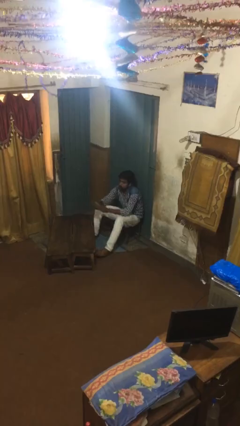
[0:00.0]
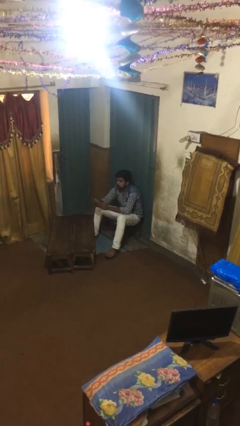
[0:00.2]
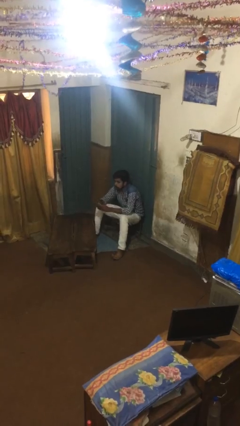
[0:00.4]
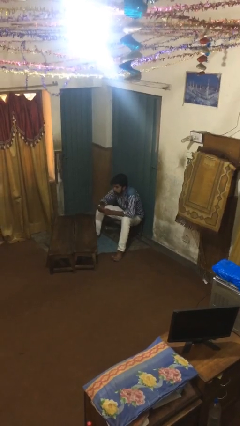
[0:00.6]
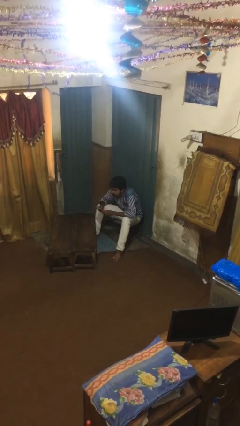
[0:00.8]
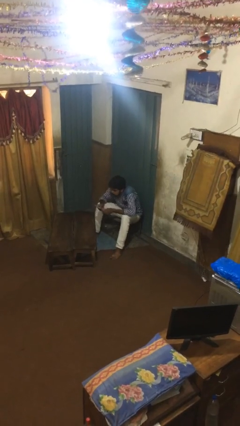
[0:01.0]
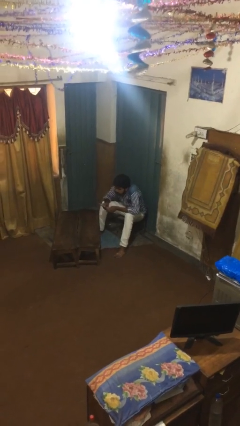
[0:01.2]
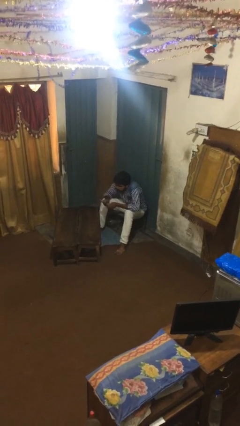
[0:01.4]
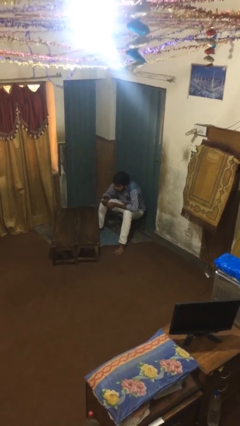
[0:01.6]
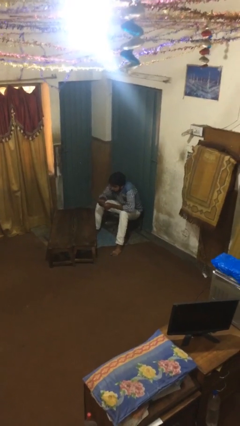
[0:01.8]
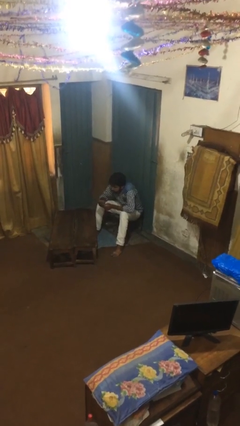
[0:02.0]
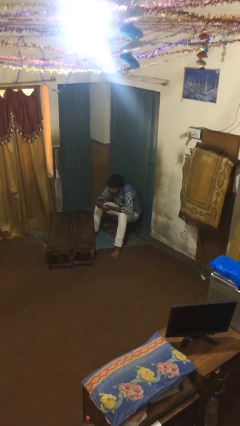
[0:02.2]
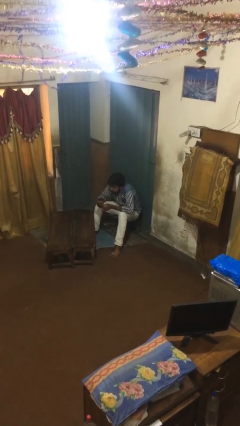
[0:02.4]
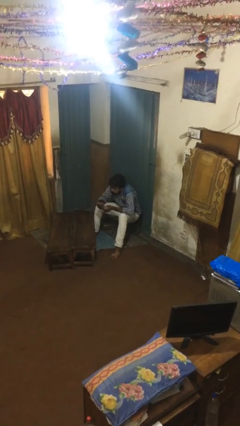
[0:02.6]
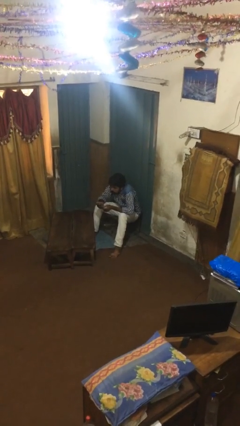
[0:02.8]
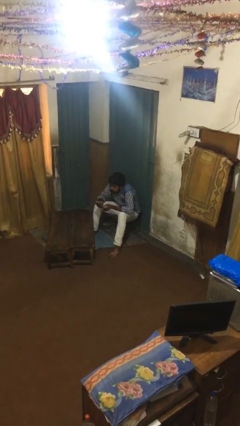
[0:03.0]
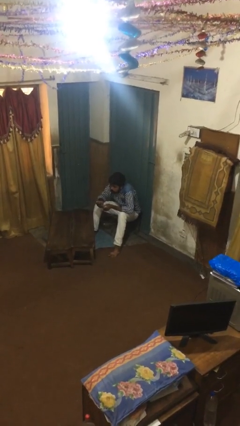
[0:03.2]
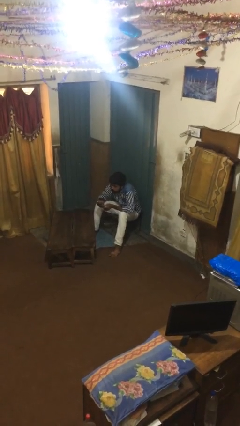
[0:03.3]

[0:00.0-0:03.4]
person reads document

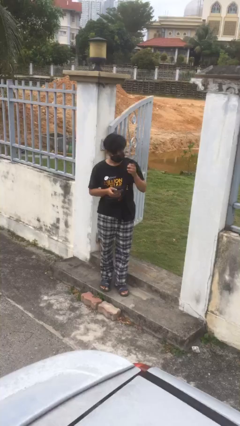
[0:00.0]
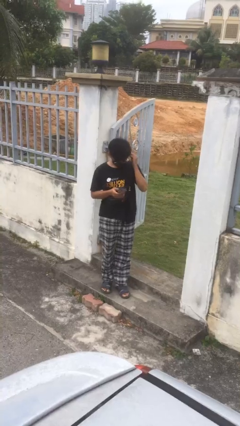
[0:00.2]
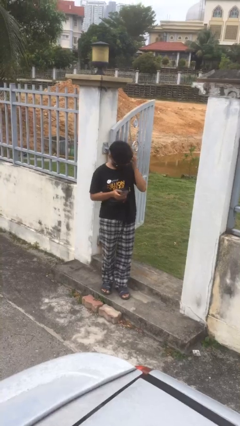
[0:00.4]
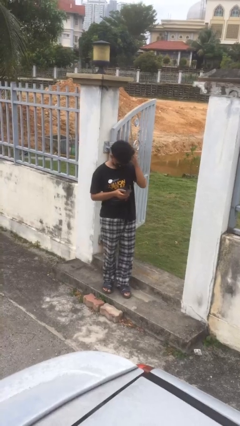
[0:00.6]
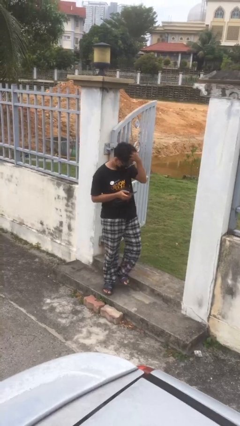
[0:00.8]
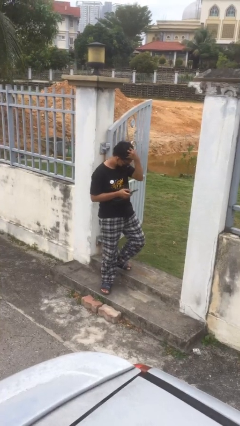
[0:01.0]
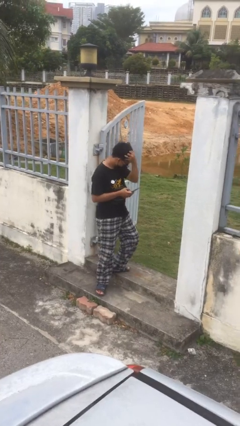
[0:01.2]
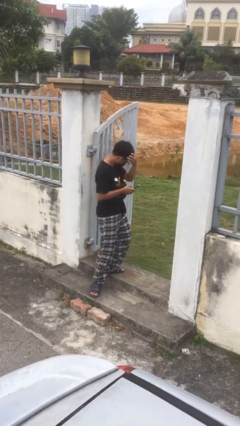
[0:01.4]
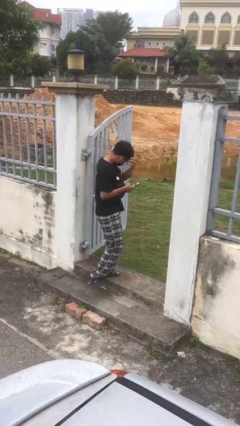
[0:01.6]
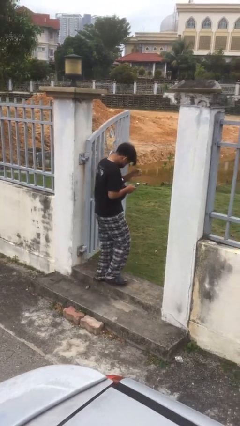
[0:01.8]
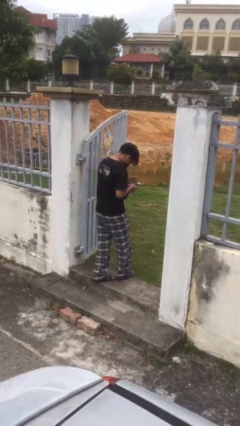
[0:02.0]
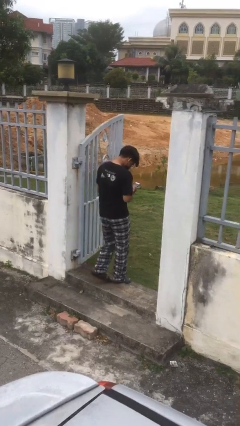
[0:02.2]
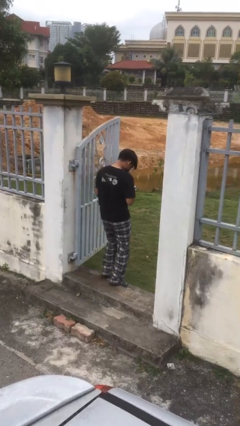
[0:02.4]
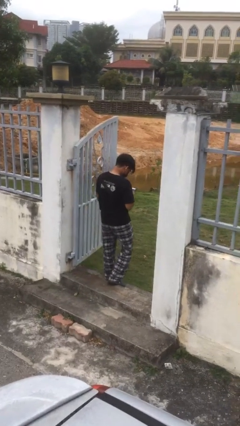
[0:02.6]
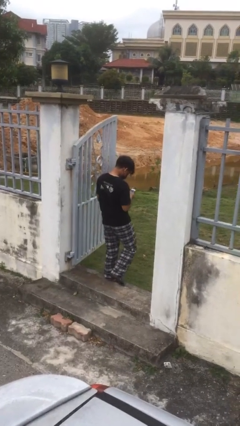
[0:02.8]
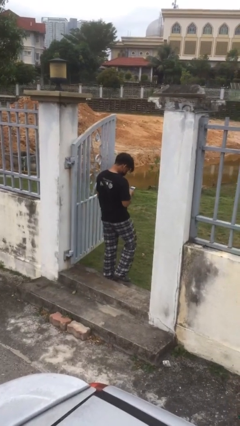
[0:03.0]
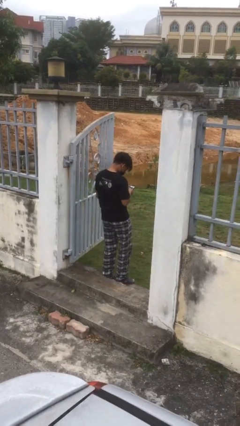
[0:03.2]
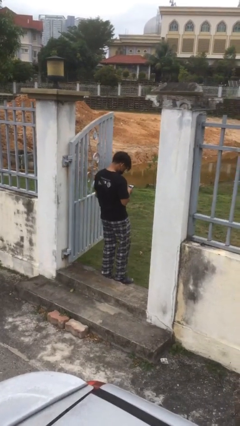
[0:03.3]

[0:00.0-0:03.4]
person exits scene through structure

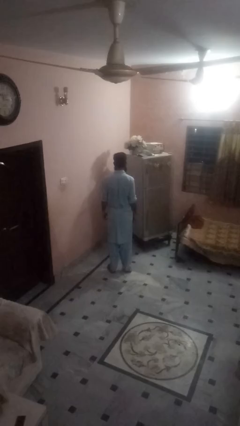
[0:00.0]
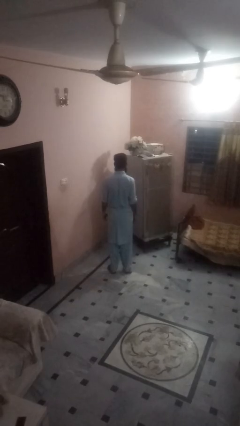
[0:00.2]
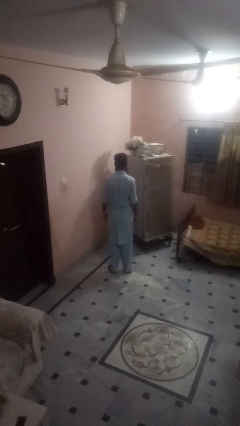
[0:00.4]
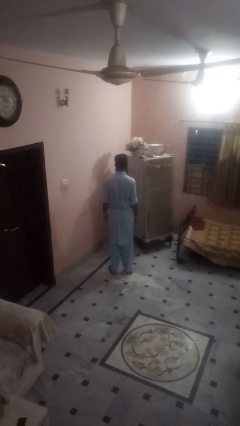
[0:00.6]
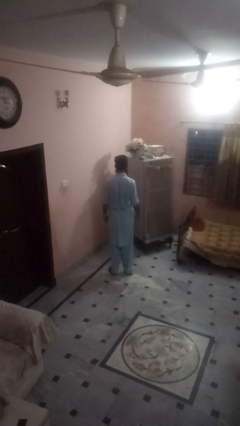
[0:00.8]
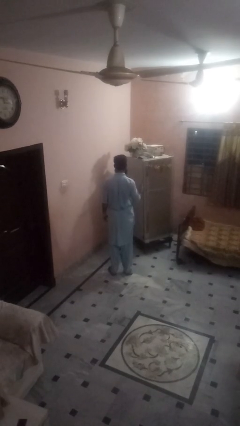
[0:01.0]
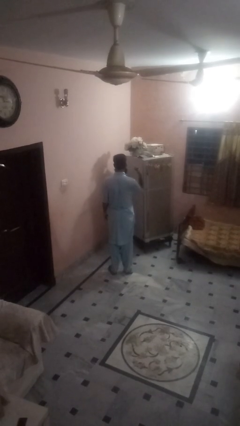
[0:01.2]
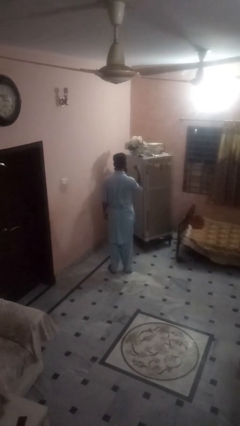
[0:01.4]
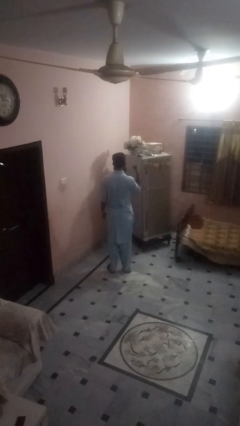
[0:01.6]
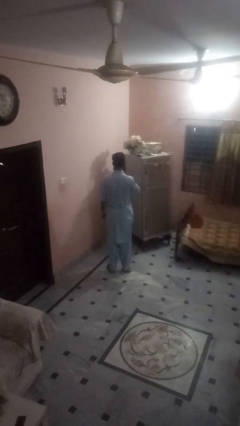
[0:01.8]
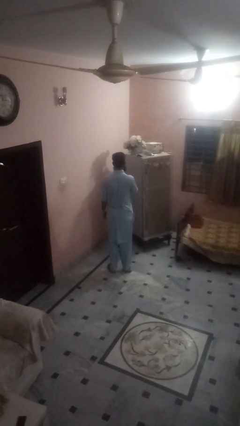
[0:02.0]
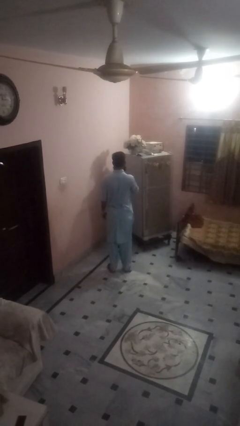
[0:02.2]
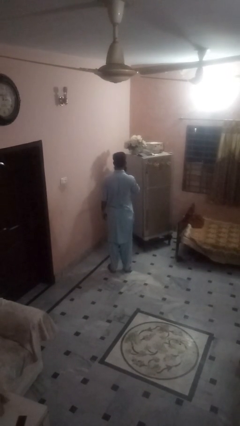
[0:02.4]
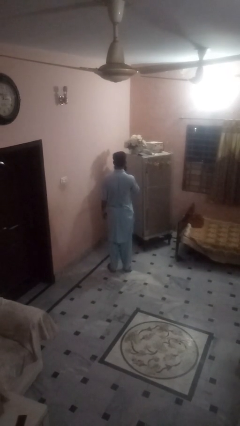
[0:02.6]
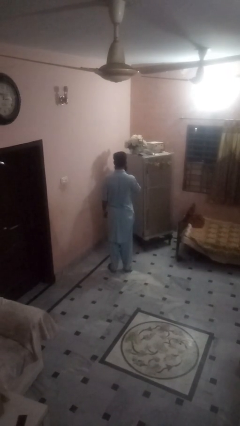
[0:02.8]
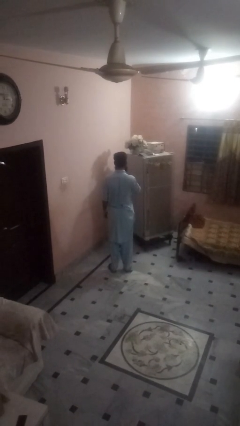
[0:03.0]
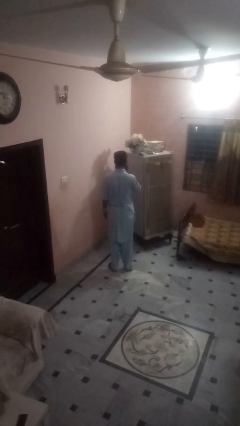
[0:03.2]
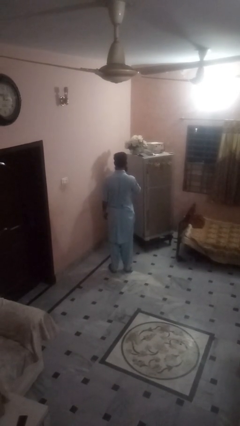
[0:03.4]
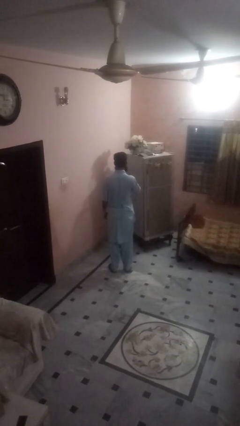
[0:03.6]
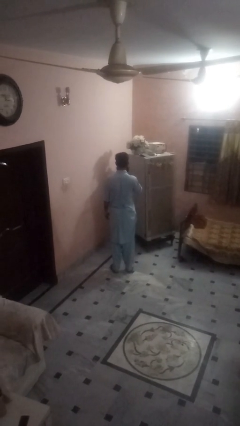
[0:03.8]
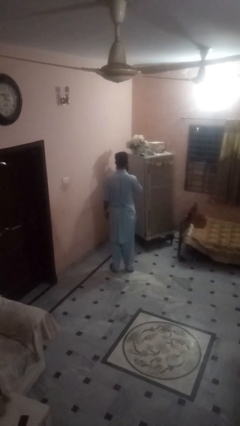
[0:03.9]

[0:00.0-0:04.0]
person gestures hang loose

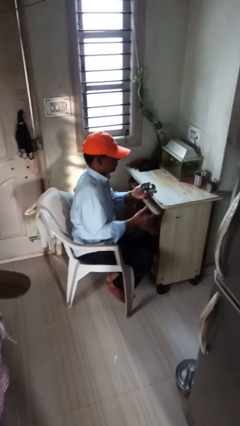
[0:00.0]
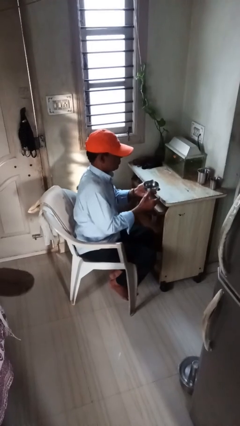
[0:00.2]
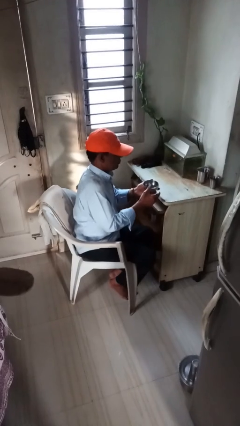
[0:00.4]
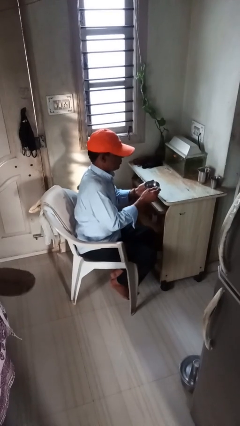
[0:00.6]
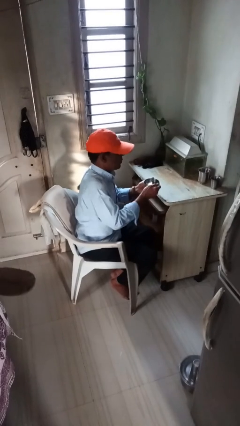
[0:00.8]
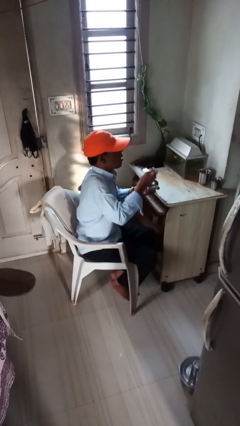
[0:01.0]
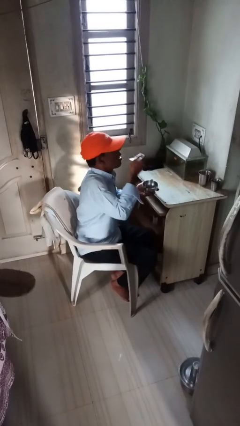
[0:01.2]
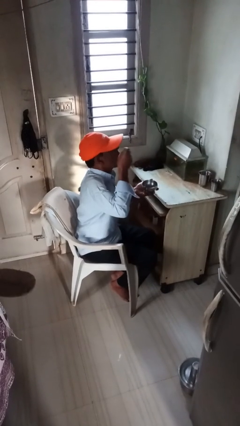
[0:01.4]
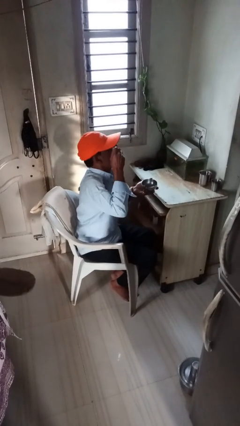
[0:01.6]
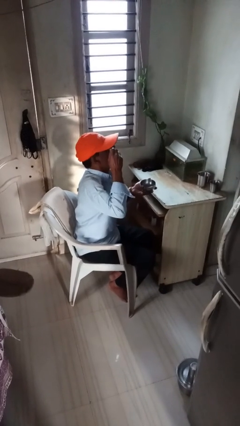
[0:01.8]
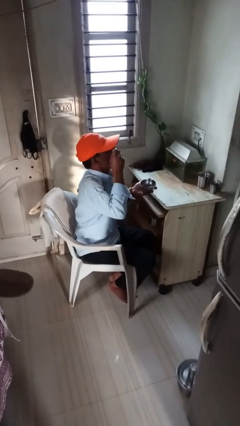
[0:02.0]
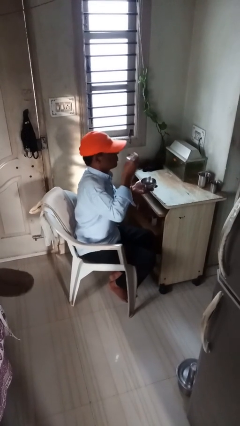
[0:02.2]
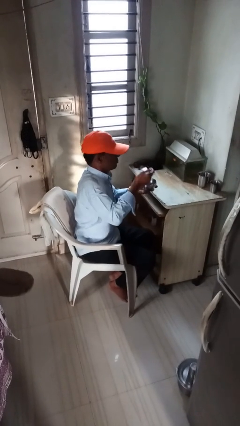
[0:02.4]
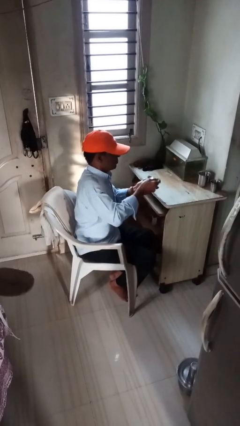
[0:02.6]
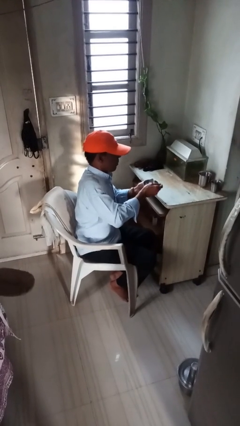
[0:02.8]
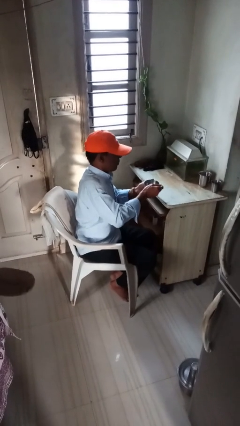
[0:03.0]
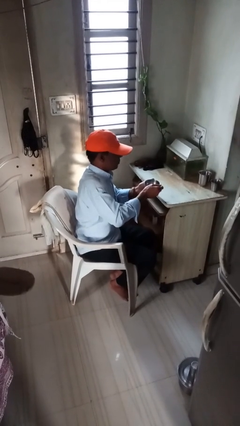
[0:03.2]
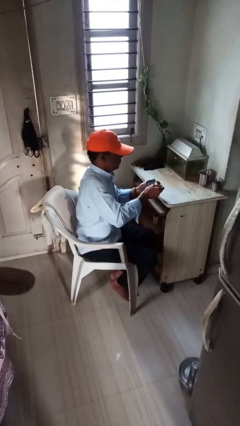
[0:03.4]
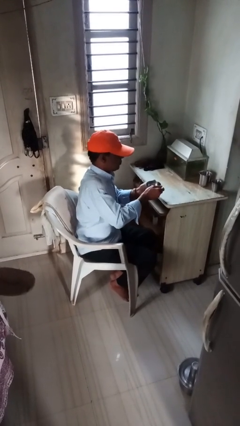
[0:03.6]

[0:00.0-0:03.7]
person eats with utensil

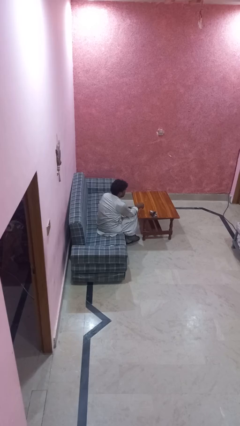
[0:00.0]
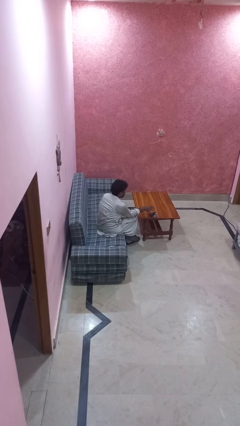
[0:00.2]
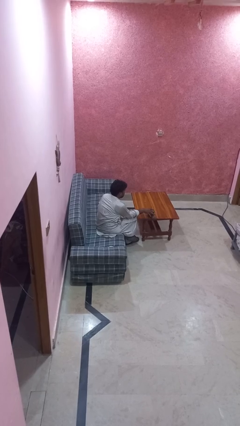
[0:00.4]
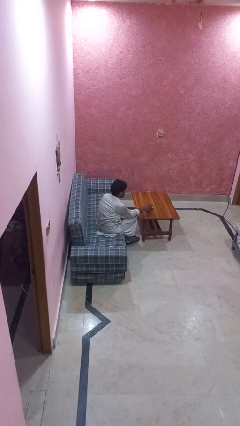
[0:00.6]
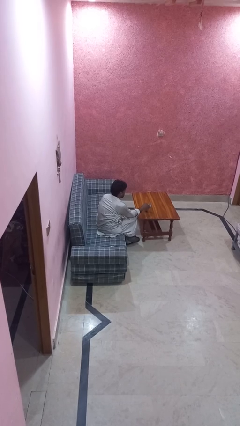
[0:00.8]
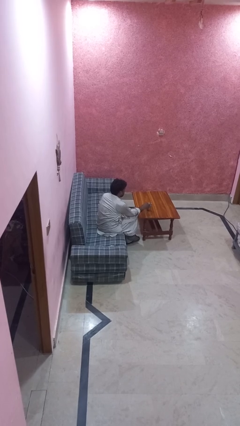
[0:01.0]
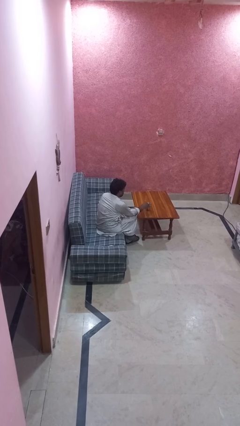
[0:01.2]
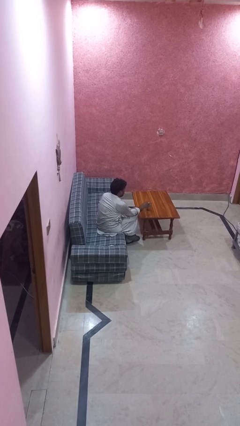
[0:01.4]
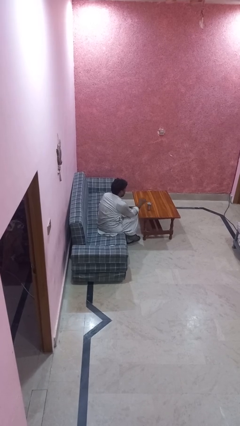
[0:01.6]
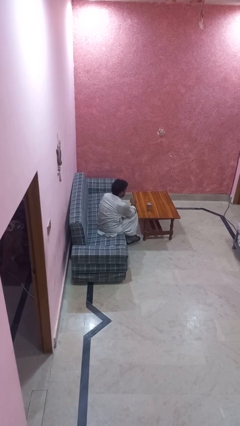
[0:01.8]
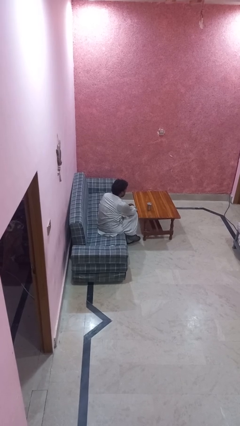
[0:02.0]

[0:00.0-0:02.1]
person sets upright glass

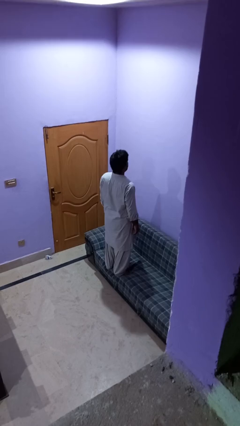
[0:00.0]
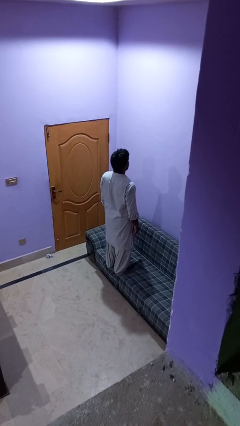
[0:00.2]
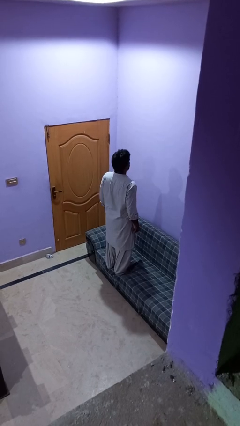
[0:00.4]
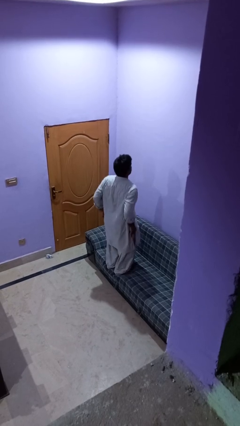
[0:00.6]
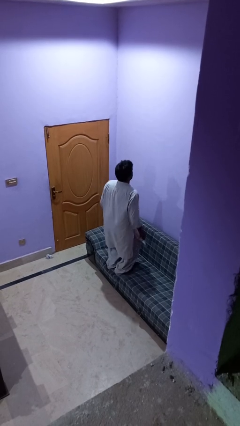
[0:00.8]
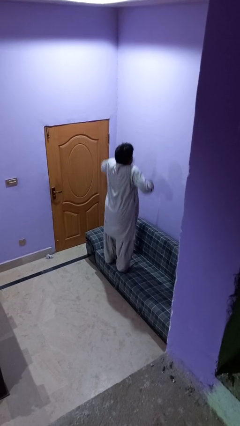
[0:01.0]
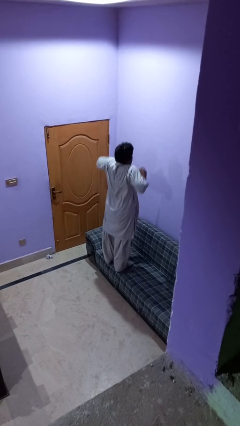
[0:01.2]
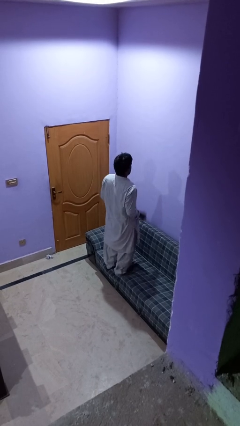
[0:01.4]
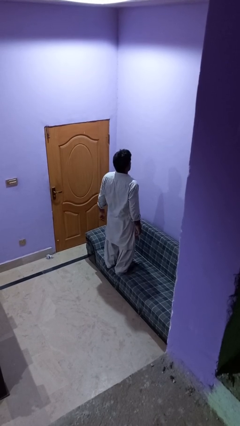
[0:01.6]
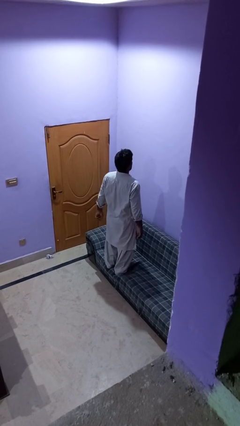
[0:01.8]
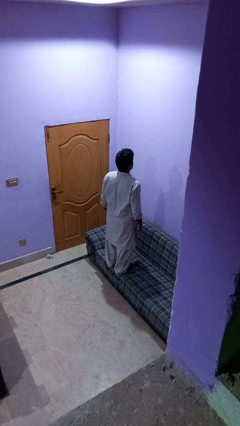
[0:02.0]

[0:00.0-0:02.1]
person jumps on couch
